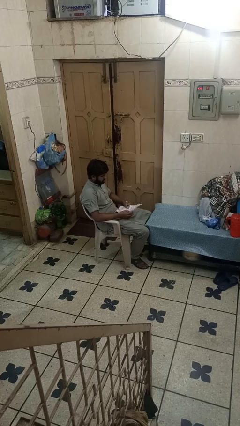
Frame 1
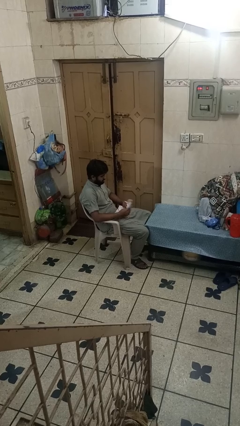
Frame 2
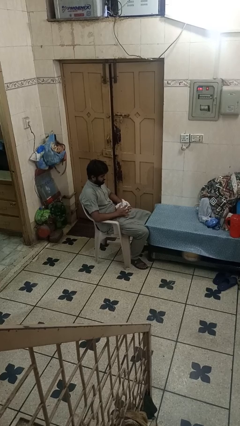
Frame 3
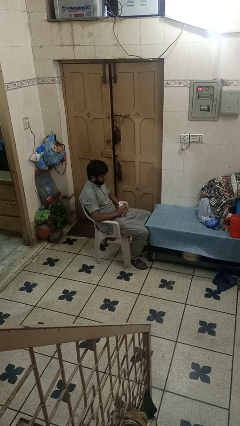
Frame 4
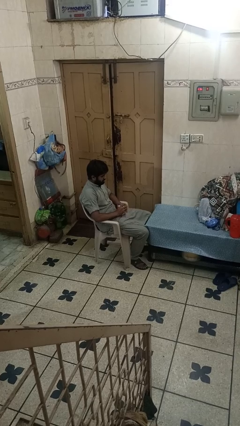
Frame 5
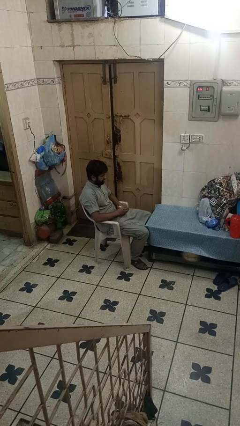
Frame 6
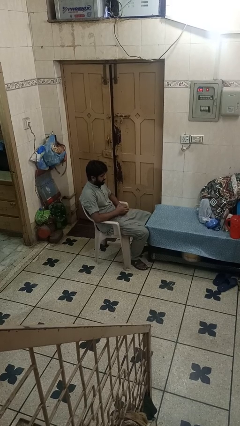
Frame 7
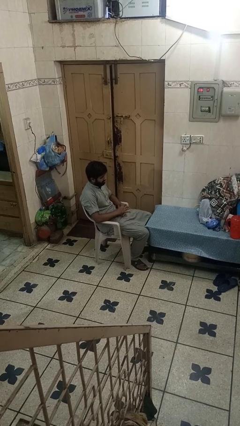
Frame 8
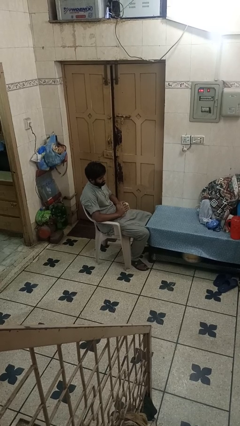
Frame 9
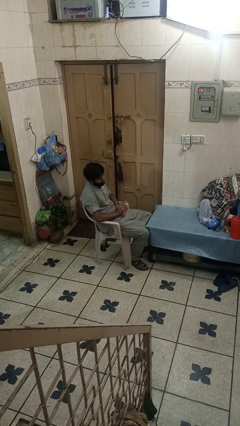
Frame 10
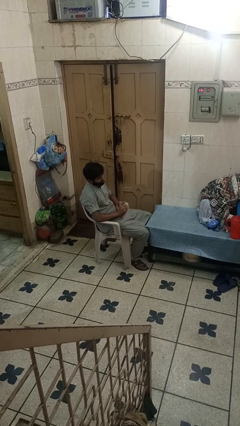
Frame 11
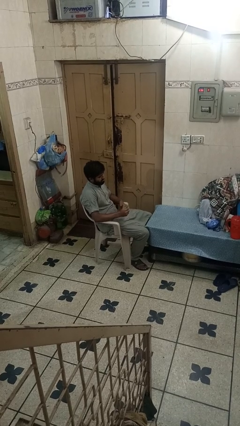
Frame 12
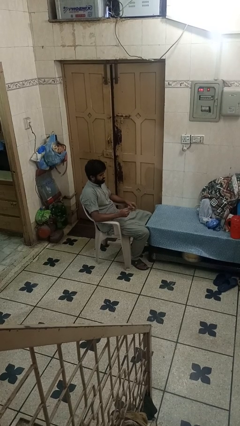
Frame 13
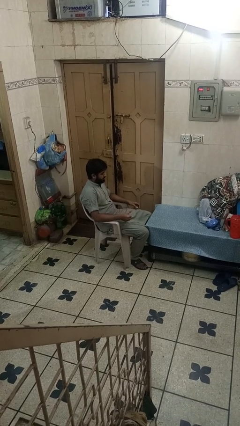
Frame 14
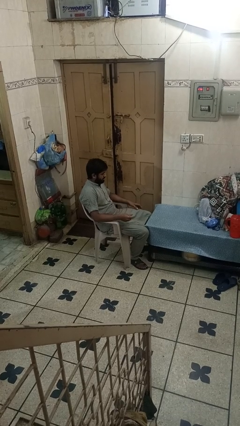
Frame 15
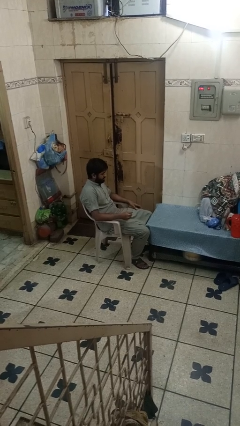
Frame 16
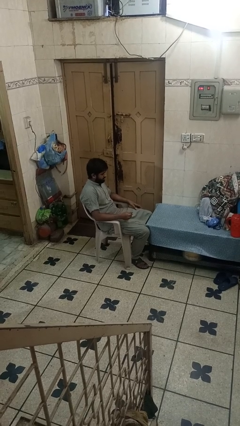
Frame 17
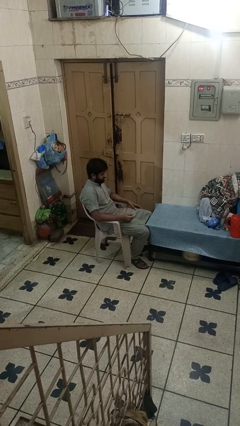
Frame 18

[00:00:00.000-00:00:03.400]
person crumples paper

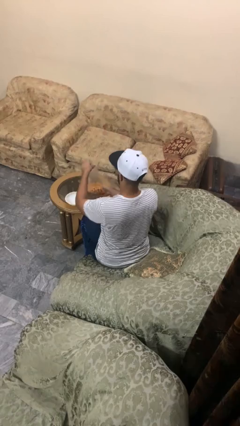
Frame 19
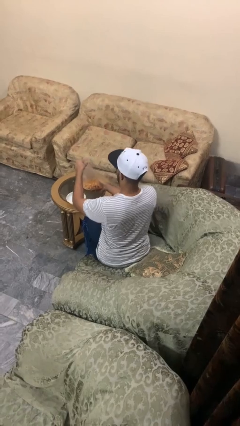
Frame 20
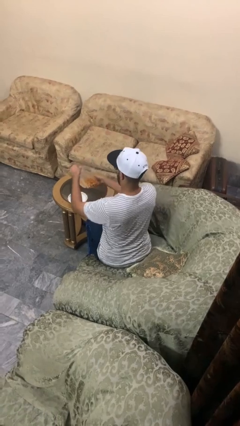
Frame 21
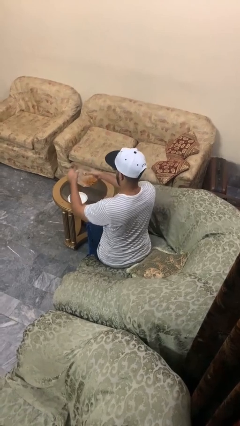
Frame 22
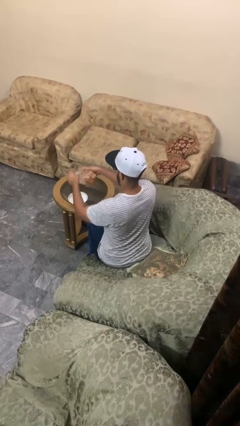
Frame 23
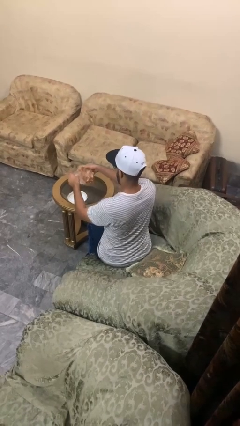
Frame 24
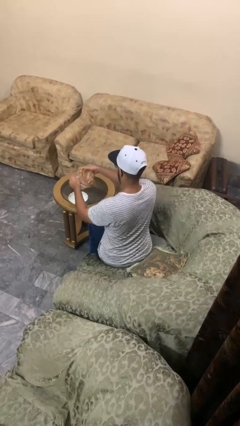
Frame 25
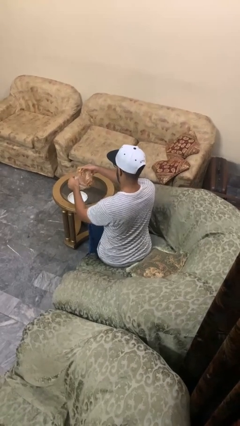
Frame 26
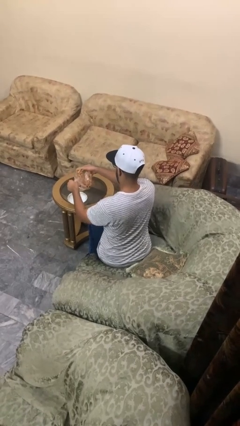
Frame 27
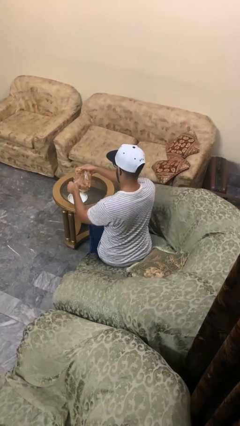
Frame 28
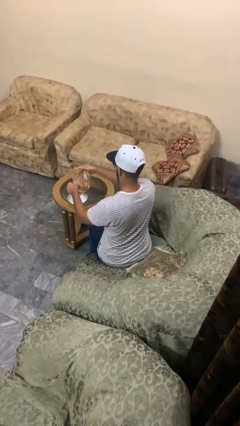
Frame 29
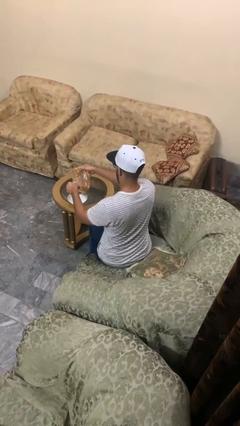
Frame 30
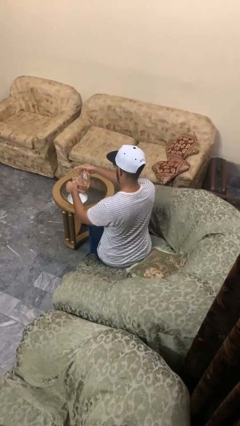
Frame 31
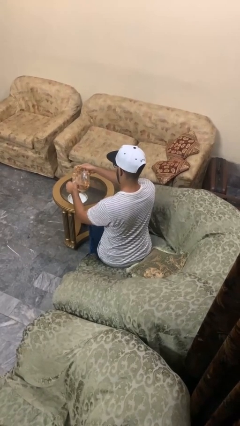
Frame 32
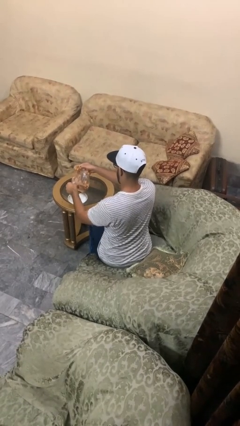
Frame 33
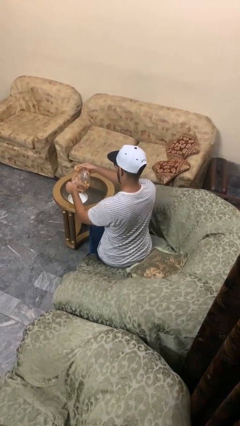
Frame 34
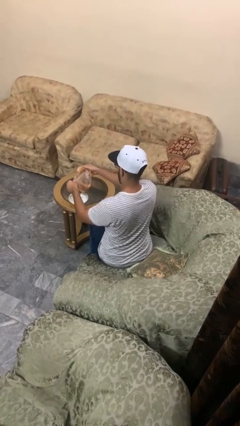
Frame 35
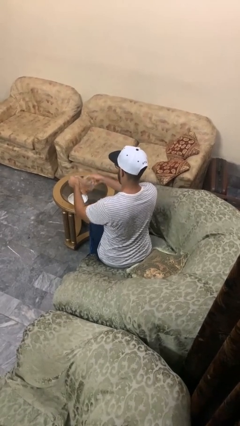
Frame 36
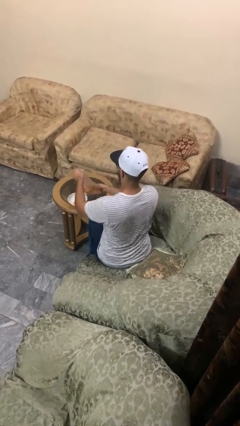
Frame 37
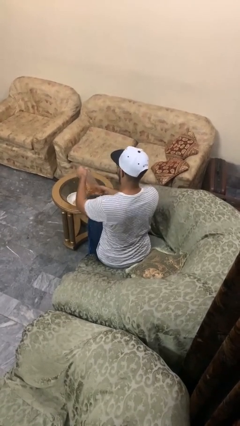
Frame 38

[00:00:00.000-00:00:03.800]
person pours into bowl

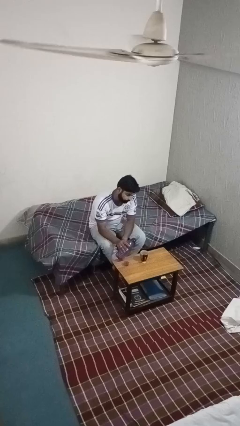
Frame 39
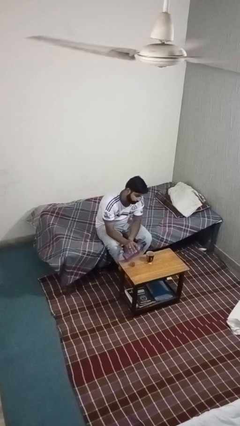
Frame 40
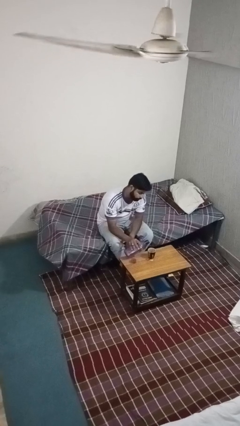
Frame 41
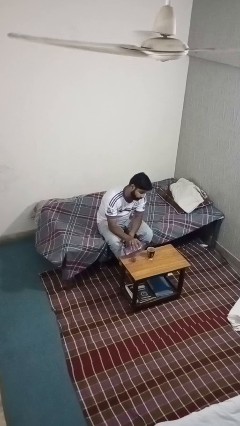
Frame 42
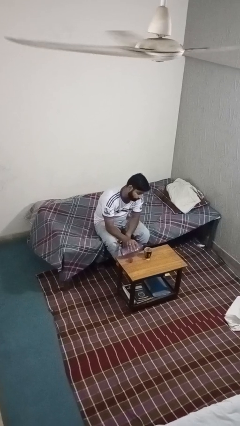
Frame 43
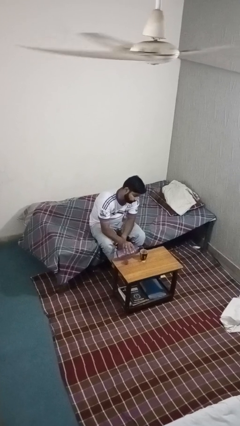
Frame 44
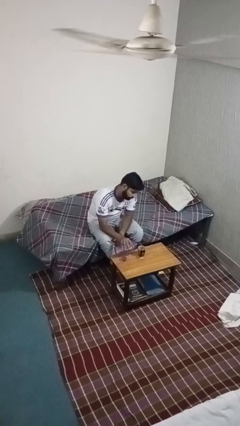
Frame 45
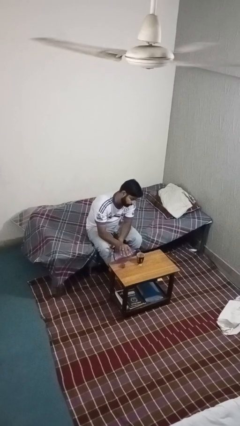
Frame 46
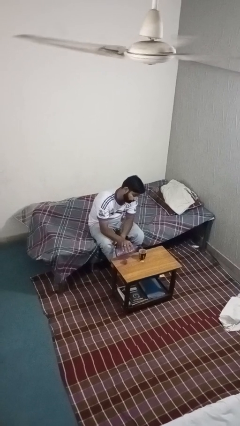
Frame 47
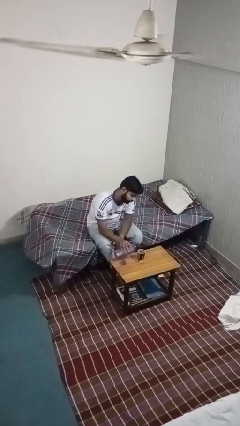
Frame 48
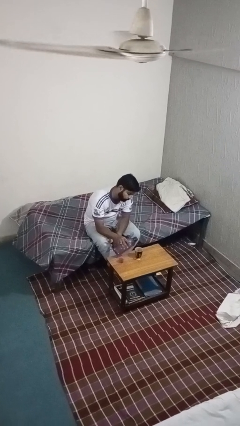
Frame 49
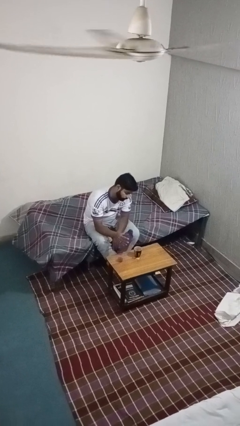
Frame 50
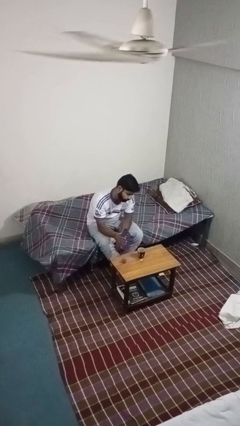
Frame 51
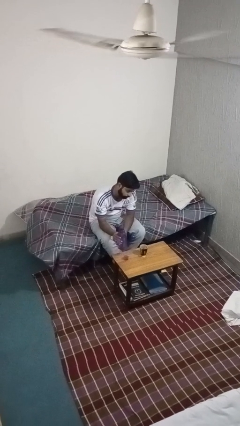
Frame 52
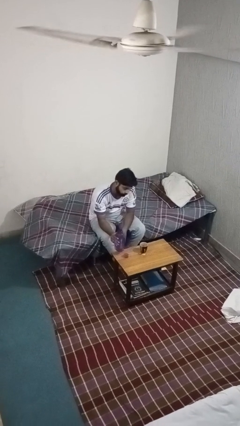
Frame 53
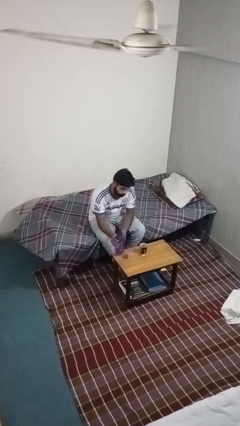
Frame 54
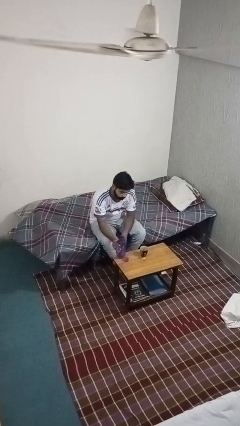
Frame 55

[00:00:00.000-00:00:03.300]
person pours liquid into cup

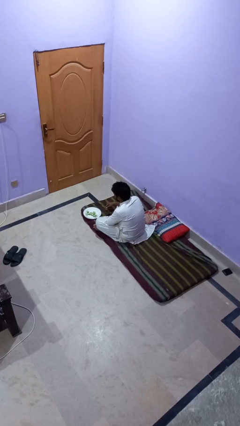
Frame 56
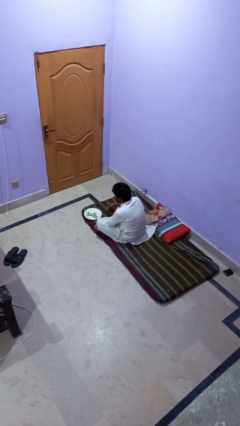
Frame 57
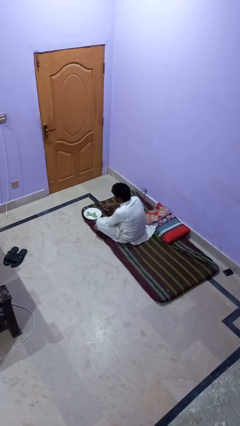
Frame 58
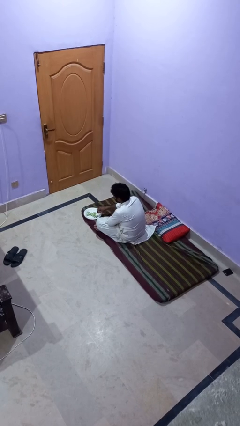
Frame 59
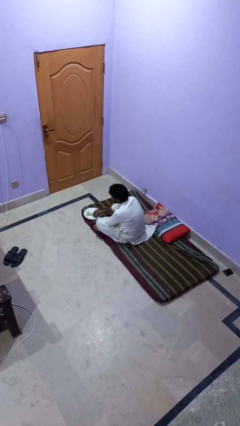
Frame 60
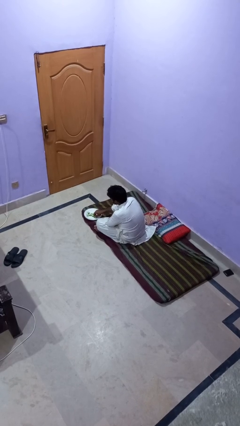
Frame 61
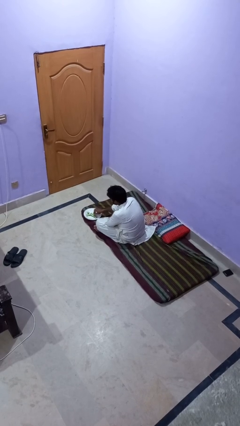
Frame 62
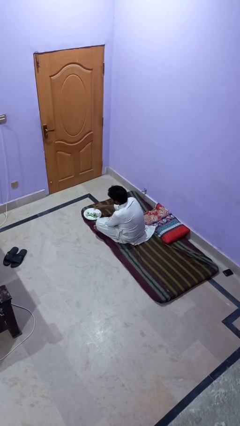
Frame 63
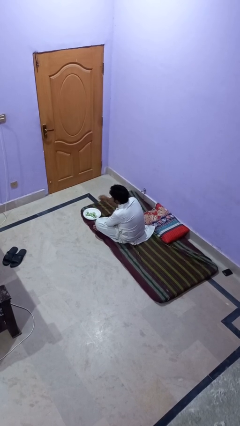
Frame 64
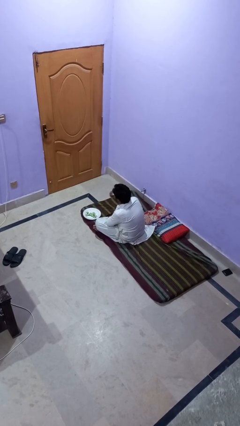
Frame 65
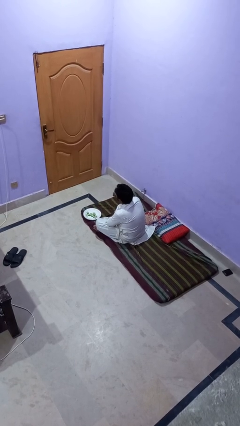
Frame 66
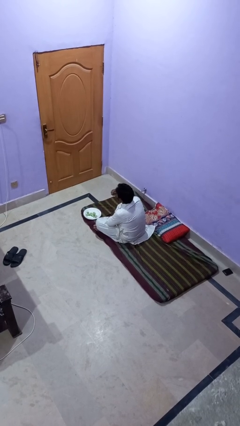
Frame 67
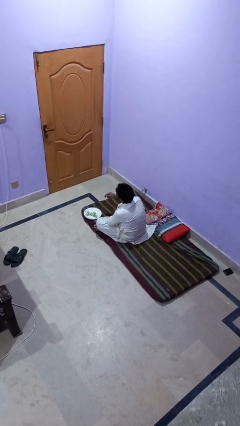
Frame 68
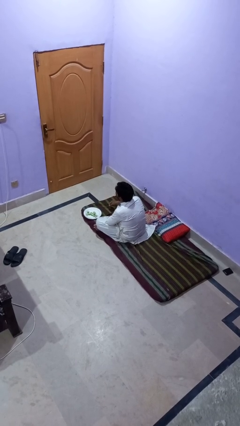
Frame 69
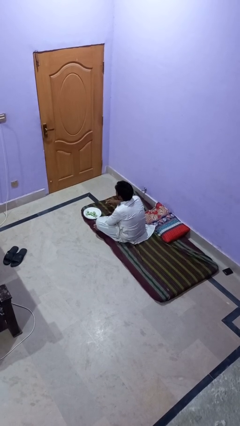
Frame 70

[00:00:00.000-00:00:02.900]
person eats with hands

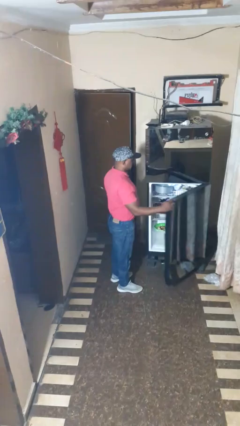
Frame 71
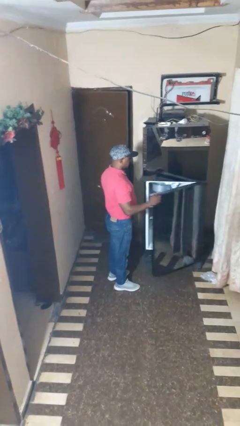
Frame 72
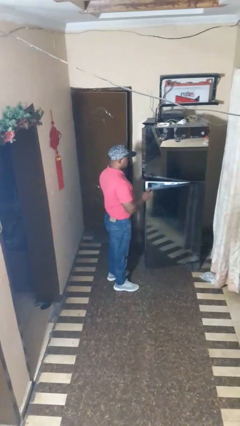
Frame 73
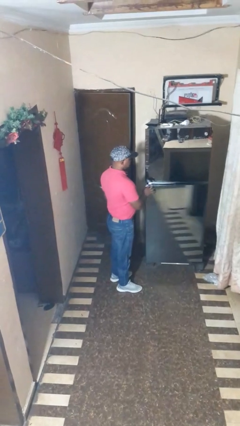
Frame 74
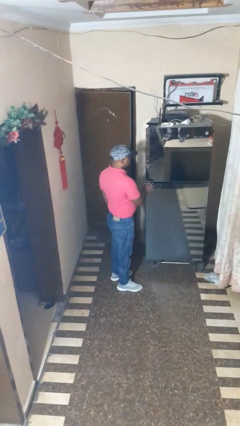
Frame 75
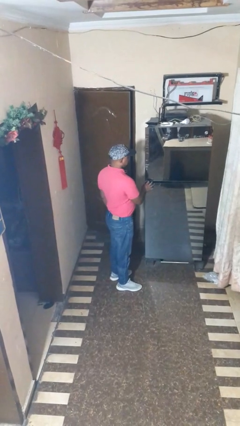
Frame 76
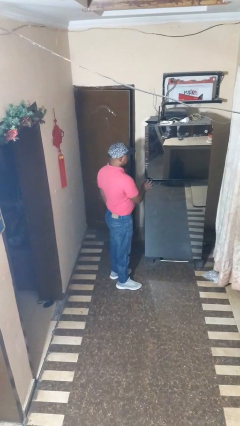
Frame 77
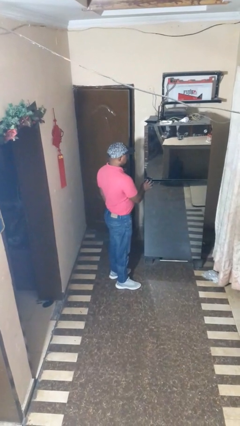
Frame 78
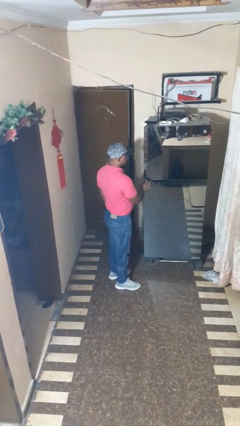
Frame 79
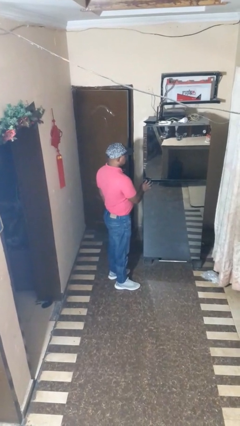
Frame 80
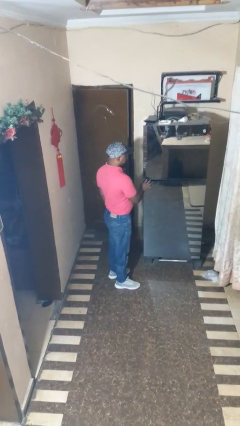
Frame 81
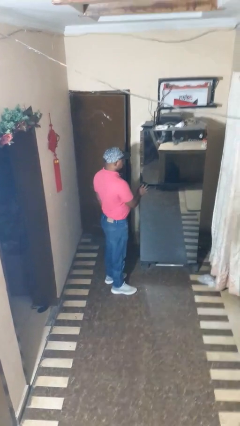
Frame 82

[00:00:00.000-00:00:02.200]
person closes refrigerator

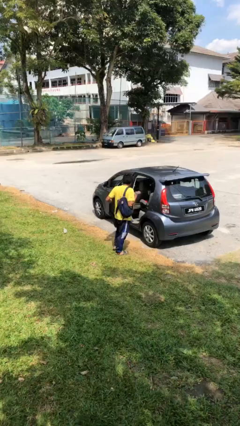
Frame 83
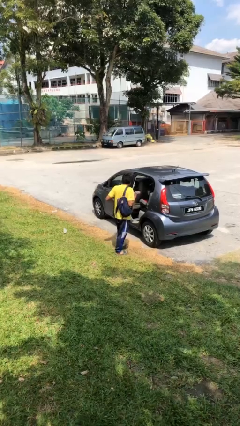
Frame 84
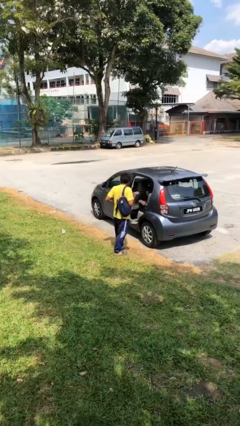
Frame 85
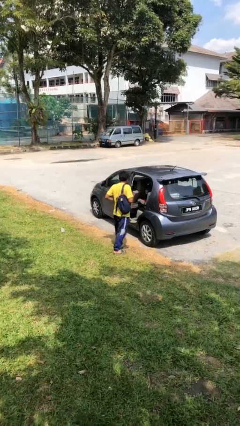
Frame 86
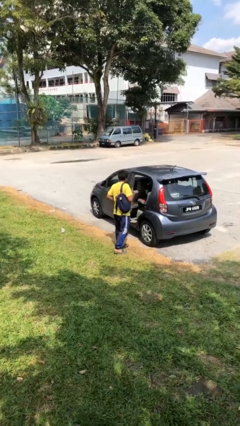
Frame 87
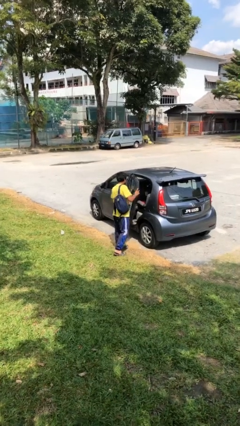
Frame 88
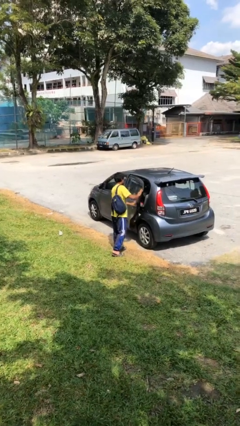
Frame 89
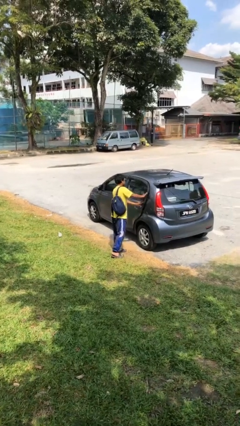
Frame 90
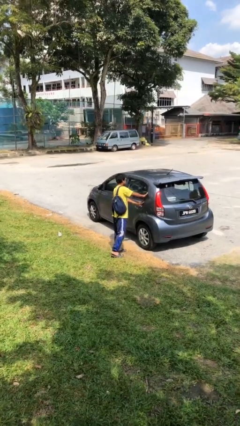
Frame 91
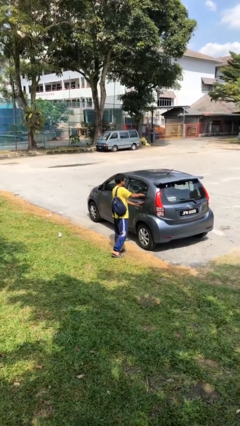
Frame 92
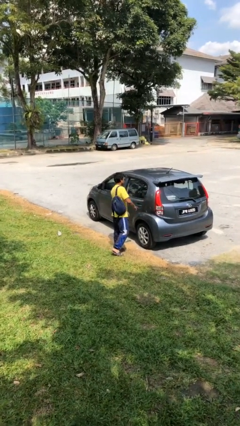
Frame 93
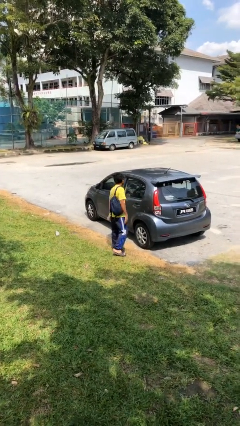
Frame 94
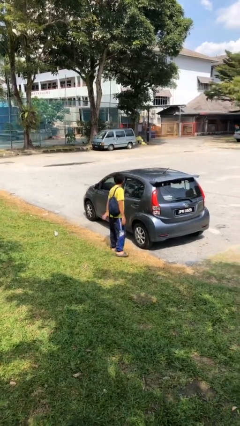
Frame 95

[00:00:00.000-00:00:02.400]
person closes car door
